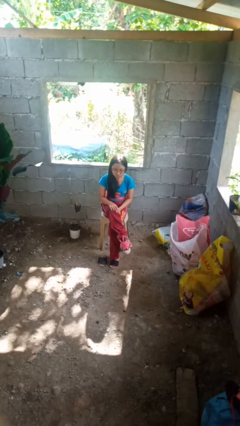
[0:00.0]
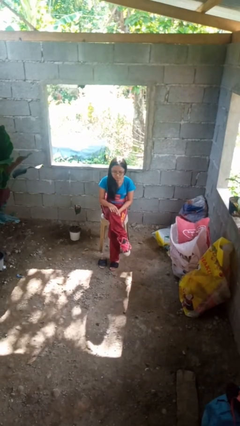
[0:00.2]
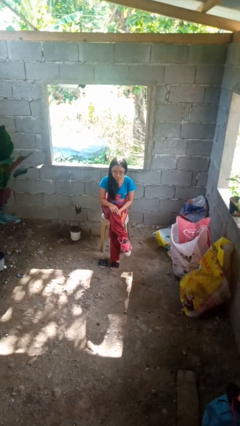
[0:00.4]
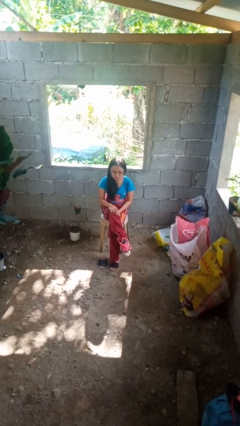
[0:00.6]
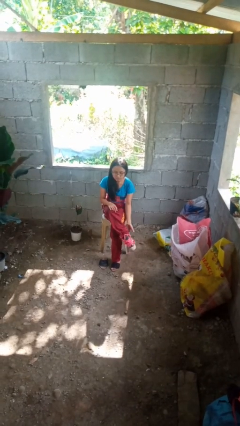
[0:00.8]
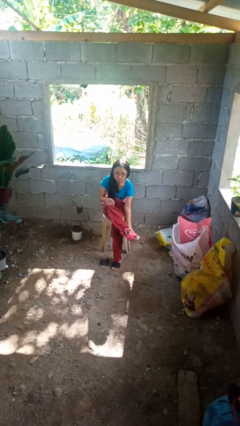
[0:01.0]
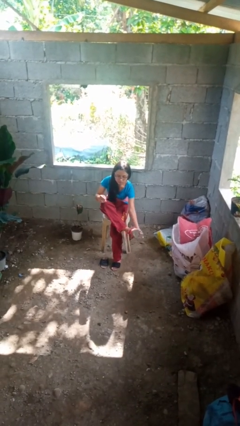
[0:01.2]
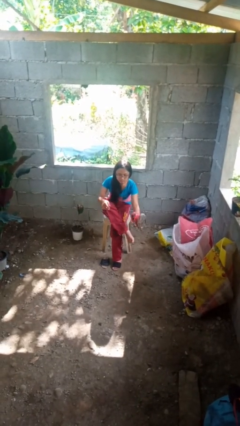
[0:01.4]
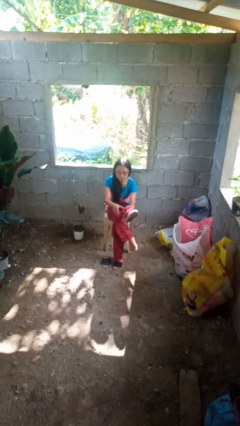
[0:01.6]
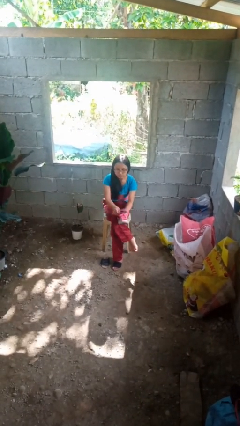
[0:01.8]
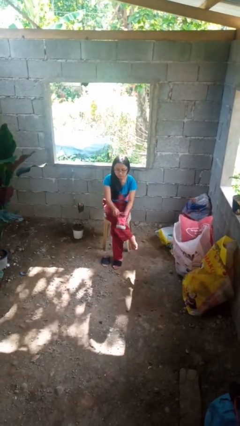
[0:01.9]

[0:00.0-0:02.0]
person takes off shoes

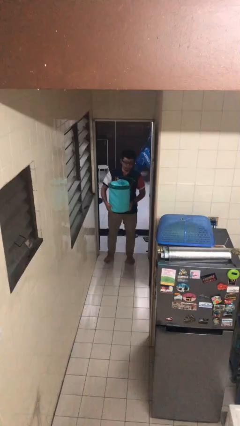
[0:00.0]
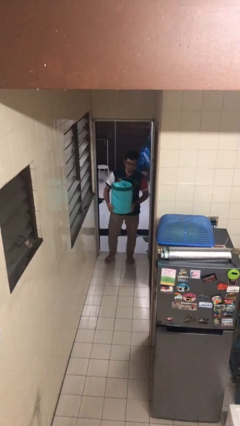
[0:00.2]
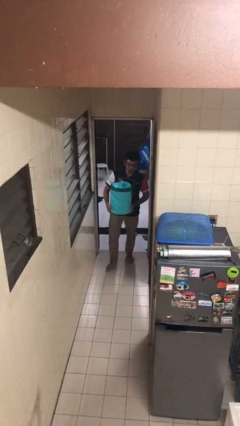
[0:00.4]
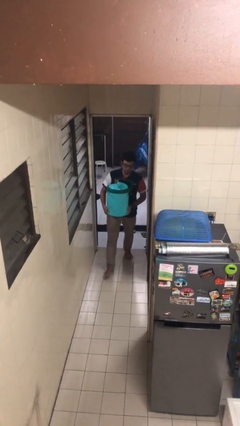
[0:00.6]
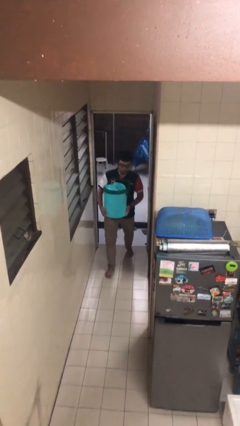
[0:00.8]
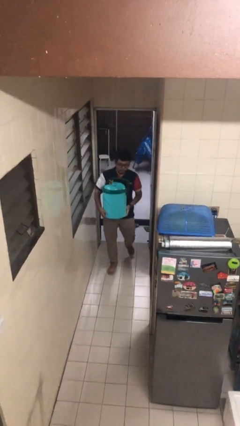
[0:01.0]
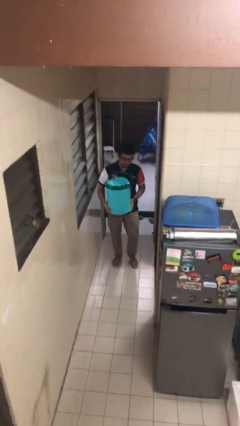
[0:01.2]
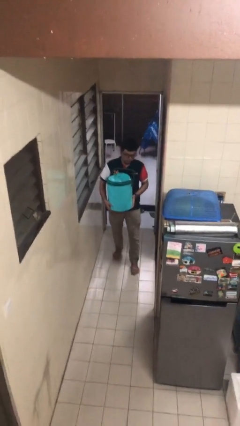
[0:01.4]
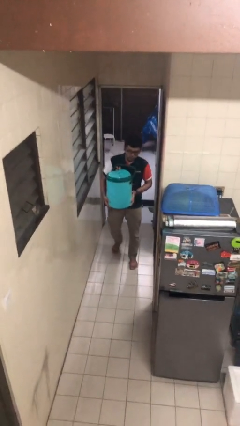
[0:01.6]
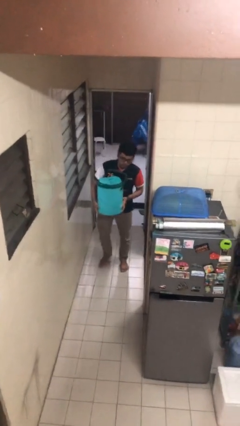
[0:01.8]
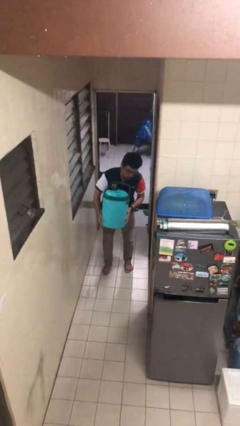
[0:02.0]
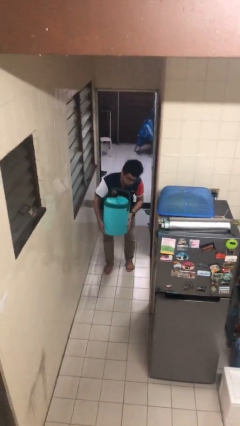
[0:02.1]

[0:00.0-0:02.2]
person carries heavy object

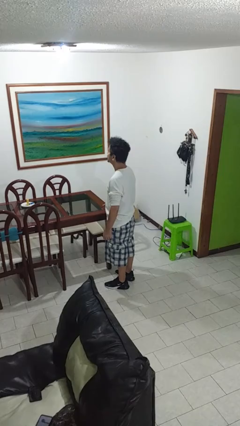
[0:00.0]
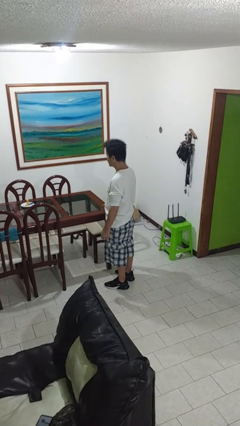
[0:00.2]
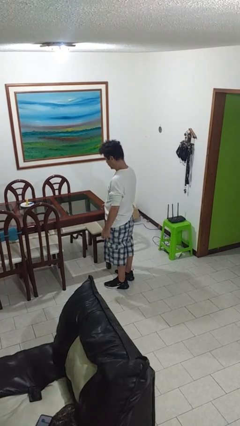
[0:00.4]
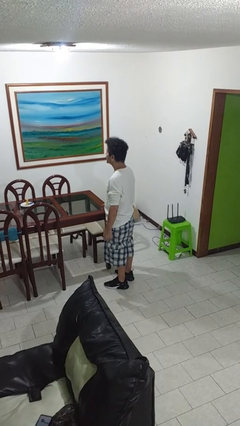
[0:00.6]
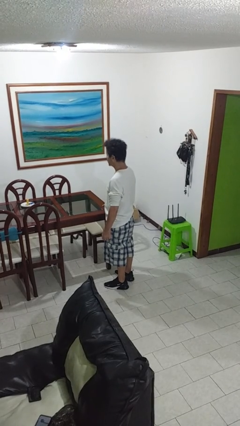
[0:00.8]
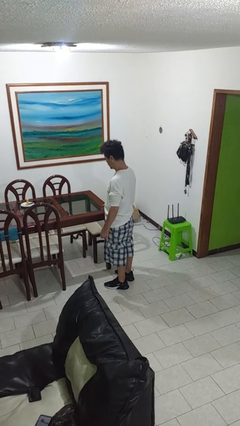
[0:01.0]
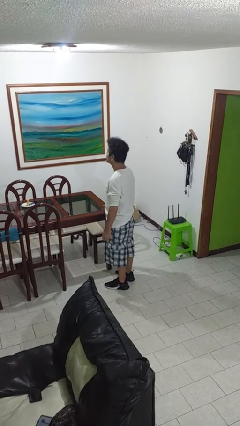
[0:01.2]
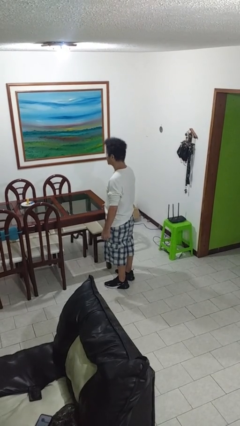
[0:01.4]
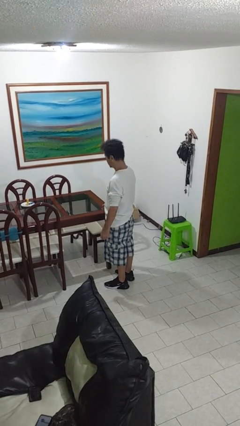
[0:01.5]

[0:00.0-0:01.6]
person nods head

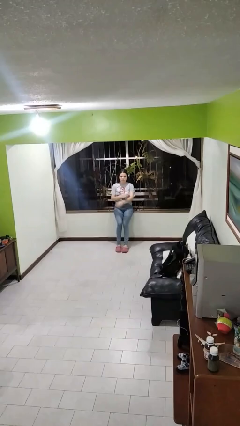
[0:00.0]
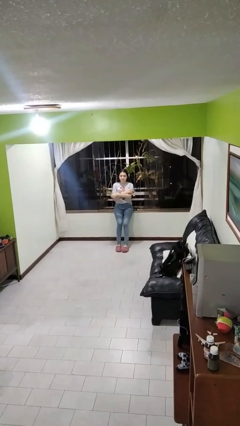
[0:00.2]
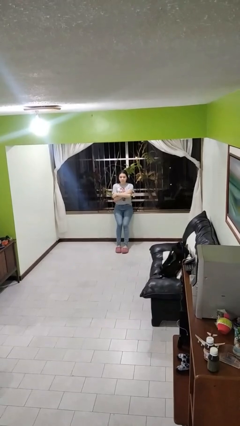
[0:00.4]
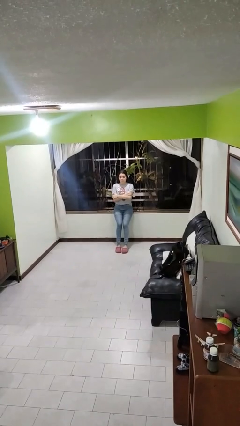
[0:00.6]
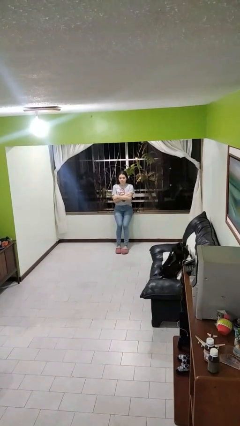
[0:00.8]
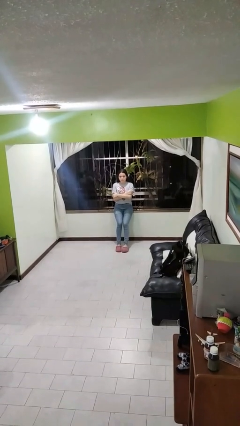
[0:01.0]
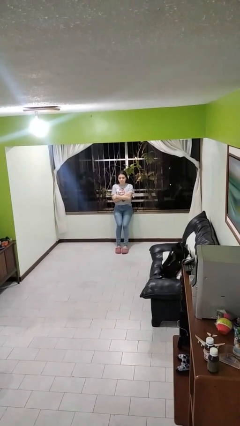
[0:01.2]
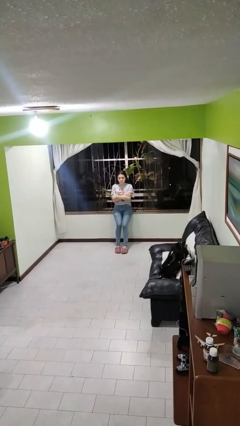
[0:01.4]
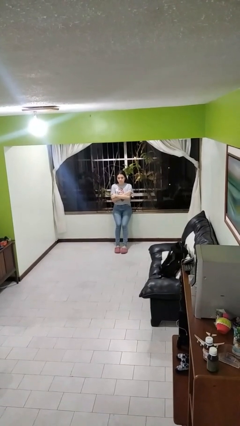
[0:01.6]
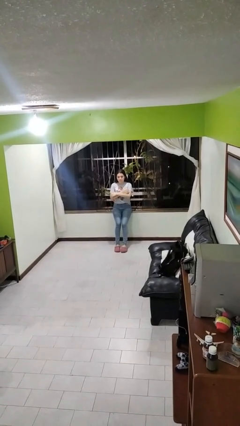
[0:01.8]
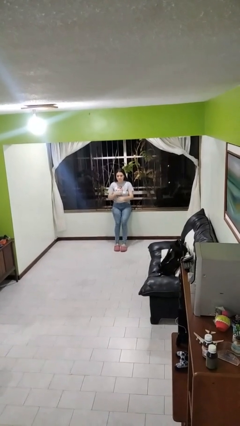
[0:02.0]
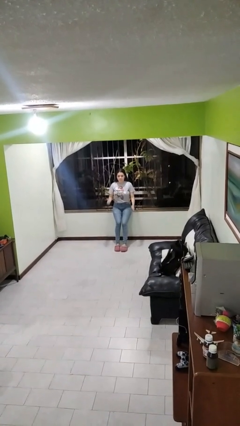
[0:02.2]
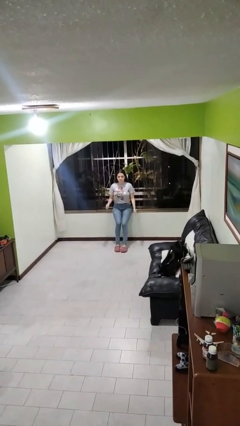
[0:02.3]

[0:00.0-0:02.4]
person crosses arms

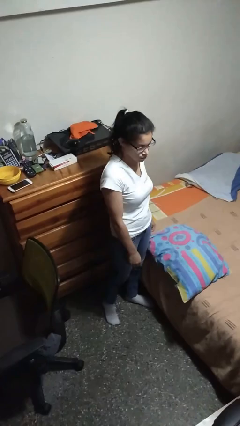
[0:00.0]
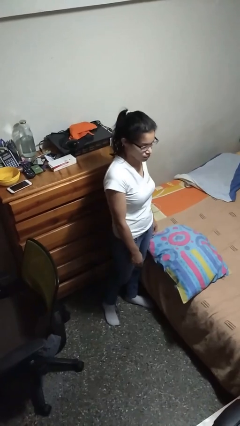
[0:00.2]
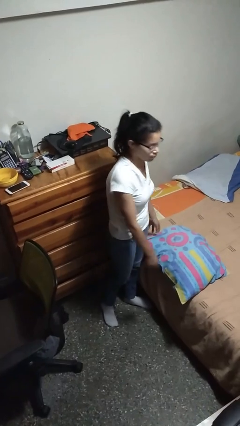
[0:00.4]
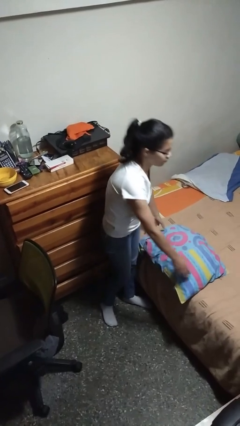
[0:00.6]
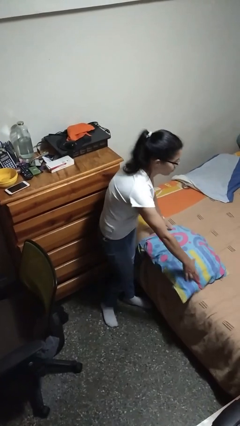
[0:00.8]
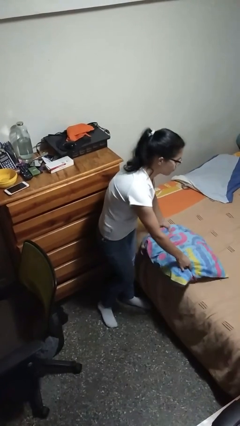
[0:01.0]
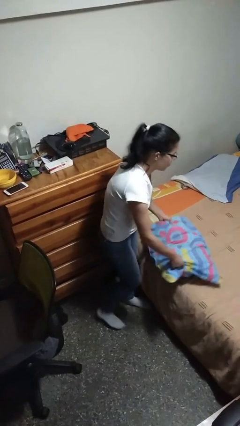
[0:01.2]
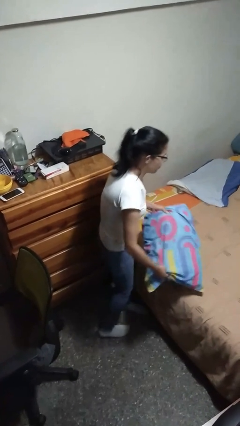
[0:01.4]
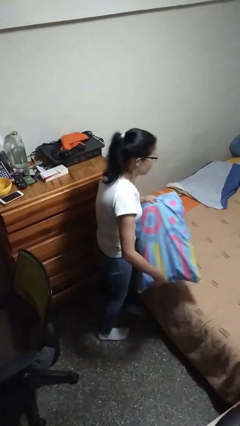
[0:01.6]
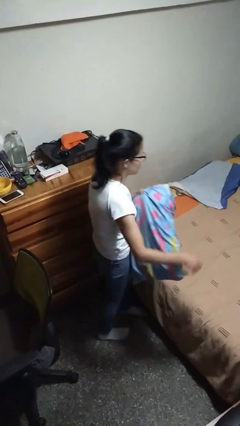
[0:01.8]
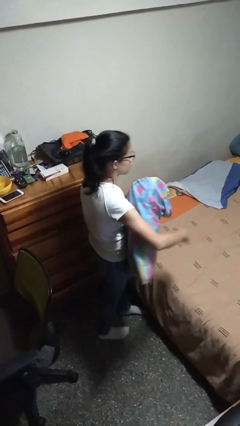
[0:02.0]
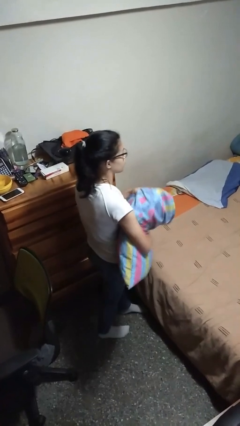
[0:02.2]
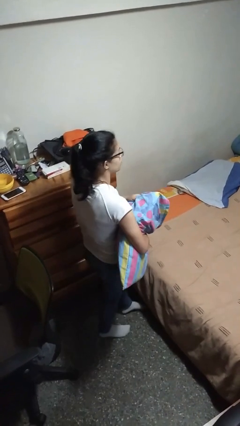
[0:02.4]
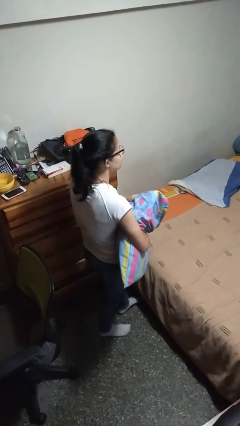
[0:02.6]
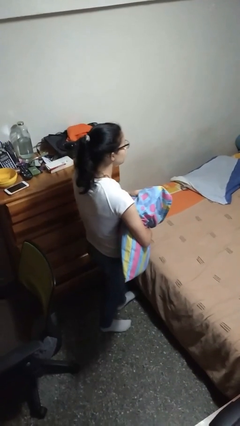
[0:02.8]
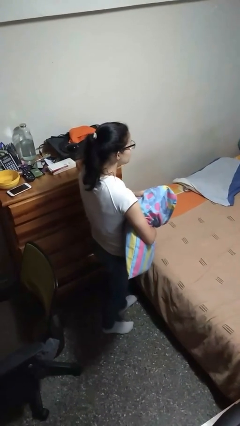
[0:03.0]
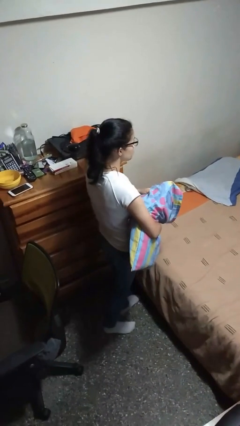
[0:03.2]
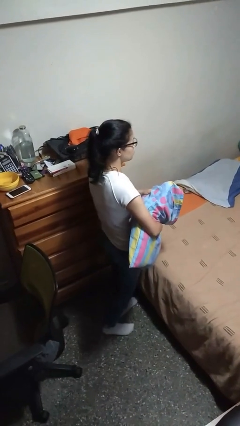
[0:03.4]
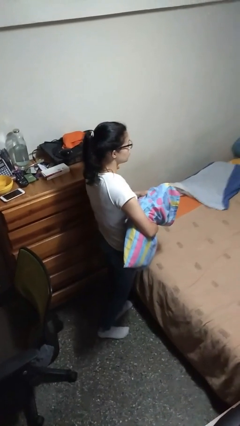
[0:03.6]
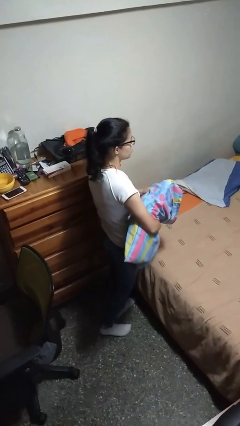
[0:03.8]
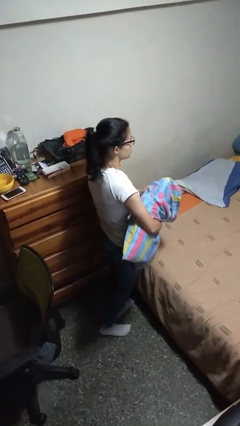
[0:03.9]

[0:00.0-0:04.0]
person picks up object from bed

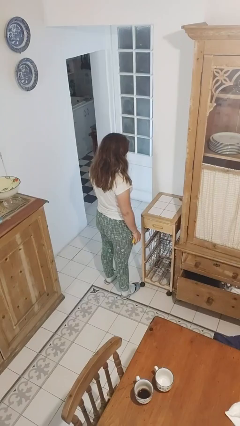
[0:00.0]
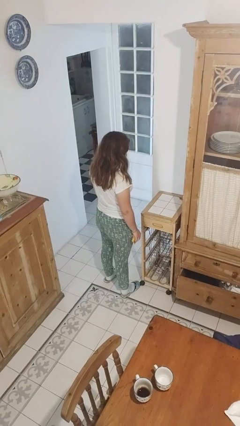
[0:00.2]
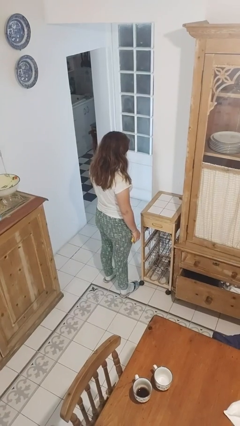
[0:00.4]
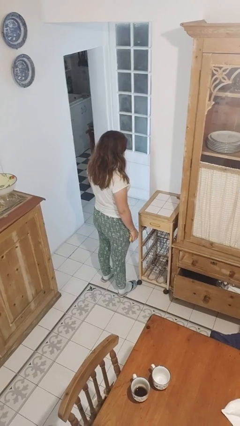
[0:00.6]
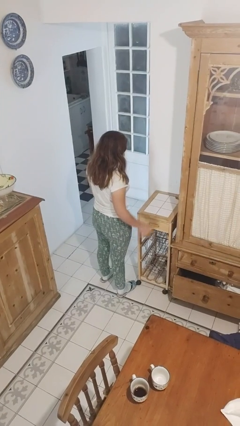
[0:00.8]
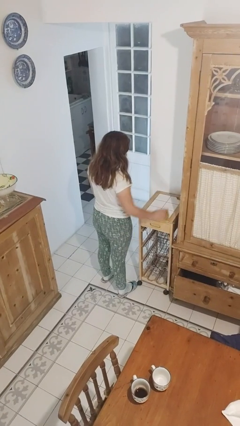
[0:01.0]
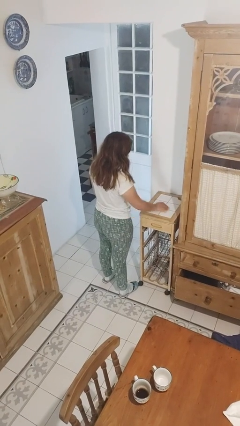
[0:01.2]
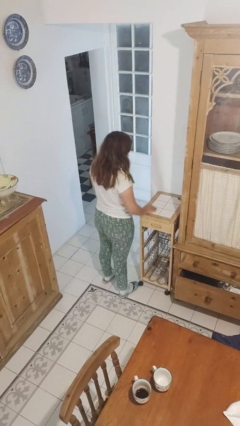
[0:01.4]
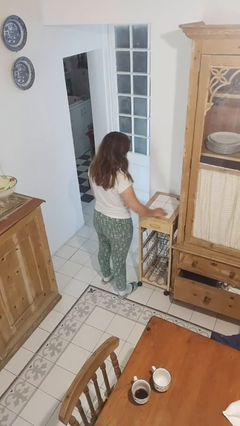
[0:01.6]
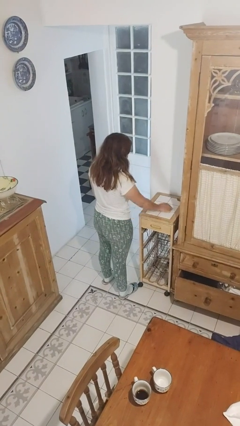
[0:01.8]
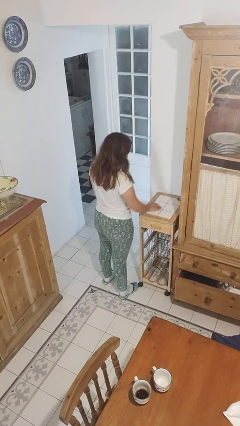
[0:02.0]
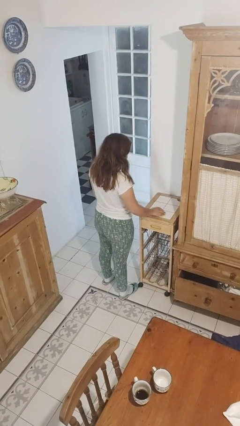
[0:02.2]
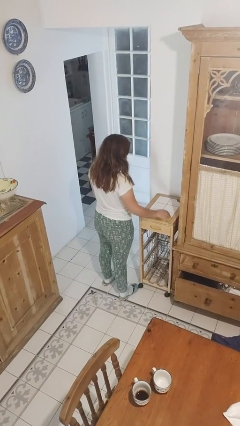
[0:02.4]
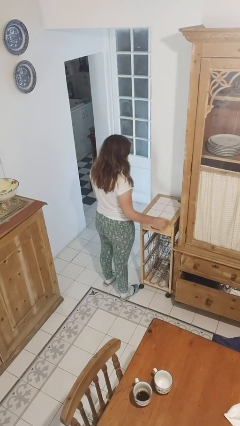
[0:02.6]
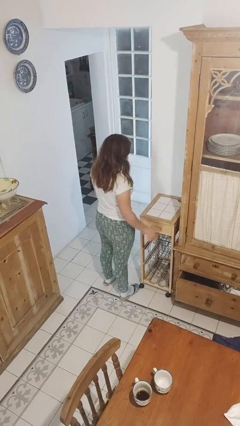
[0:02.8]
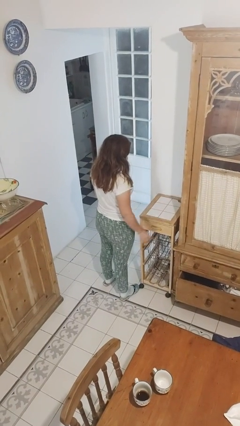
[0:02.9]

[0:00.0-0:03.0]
person cleans table with rag

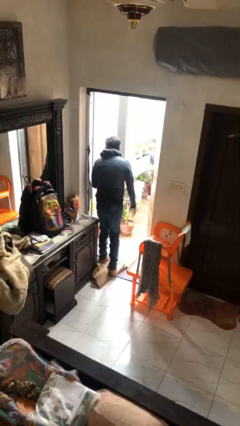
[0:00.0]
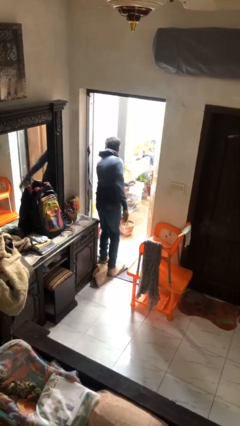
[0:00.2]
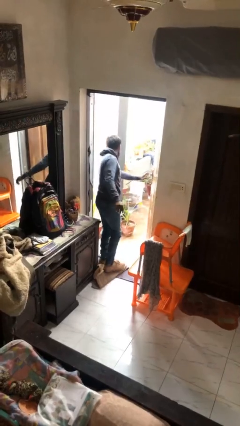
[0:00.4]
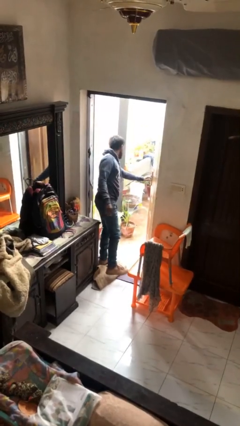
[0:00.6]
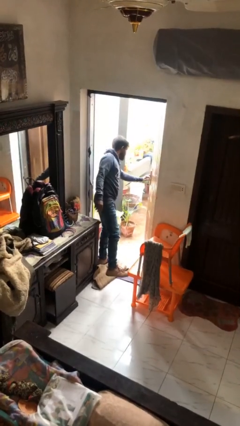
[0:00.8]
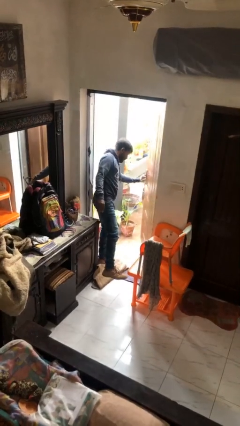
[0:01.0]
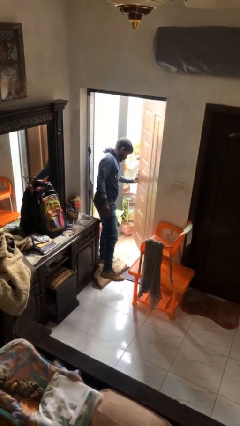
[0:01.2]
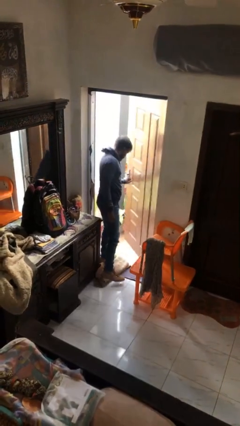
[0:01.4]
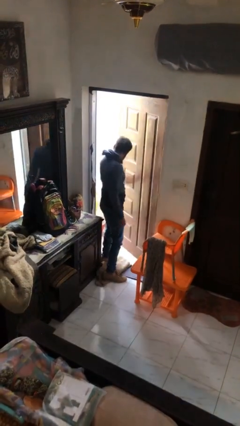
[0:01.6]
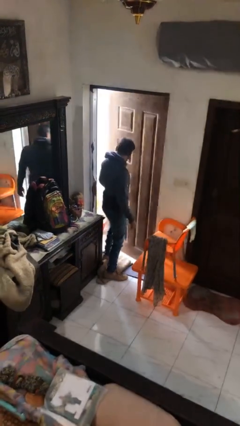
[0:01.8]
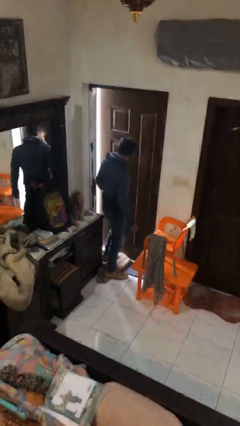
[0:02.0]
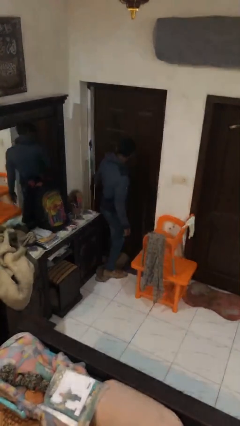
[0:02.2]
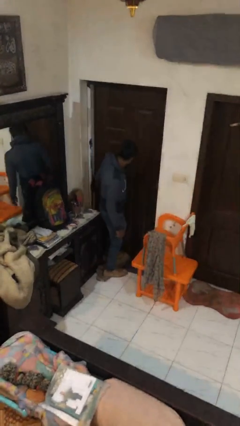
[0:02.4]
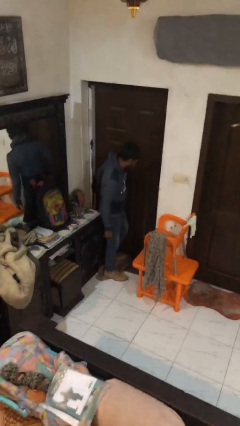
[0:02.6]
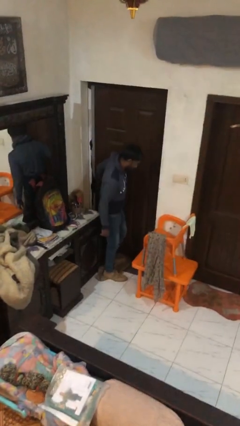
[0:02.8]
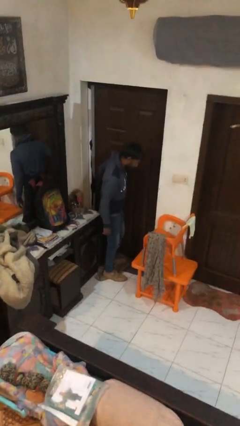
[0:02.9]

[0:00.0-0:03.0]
person closes facility door
